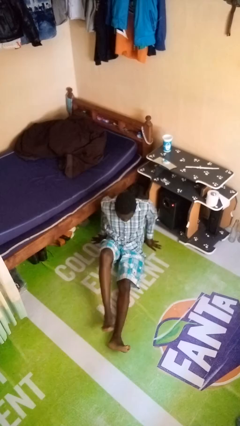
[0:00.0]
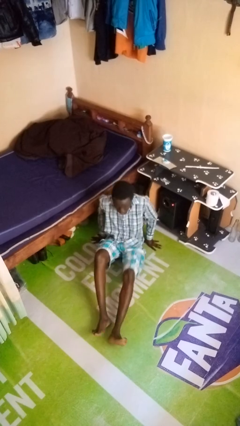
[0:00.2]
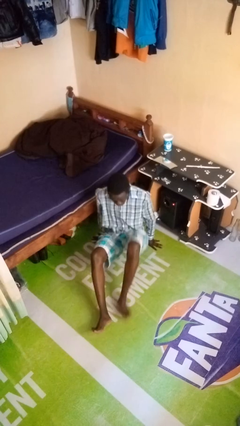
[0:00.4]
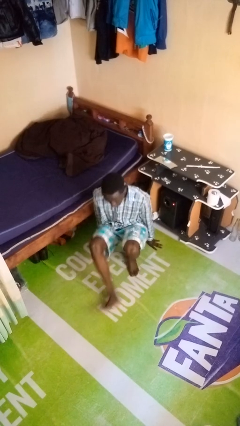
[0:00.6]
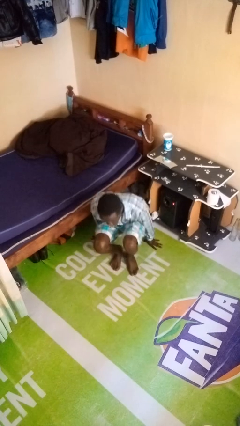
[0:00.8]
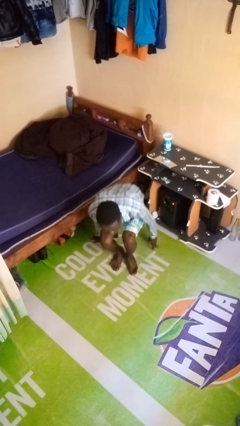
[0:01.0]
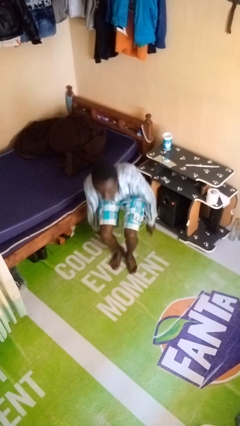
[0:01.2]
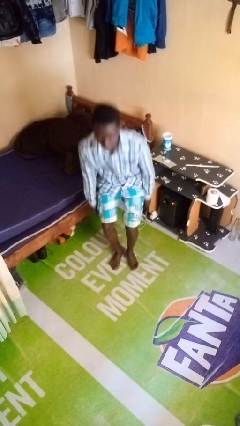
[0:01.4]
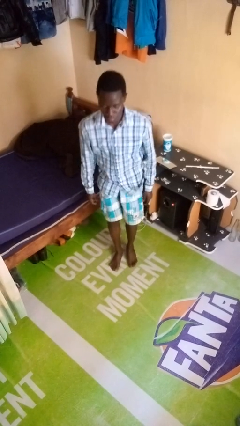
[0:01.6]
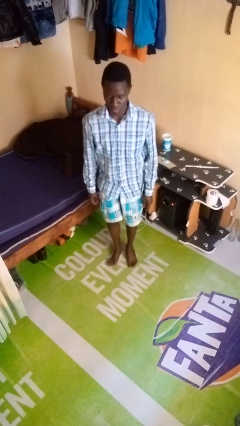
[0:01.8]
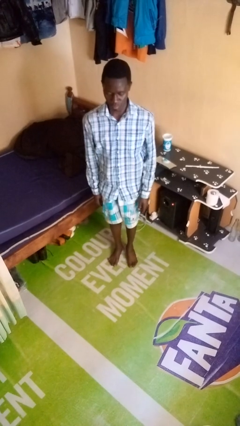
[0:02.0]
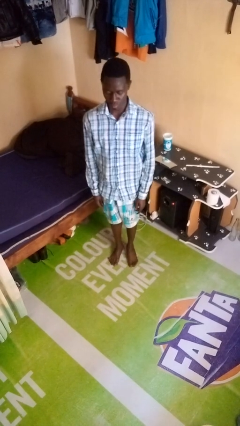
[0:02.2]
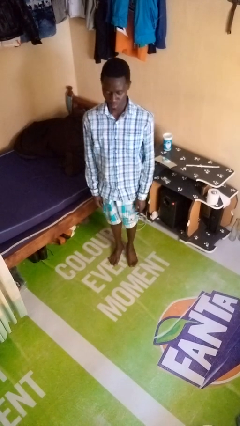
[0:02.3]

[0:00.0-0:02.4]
person stands up from floor

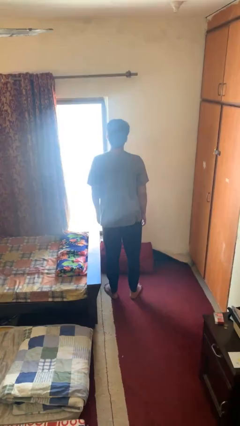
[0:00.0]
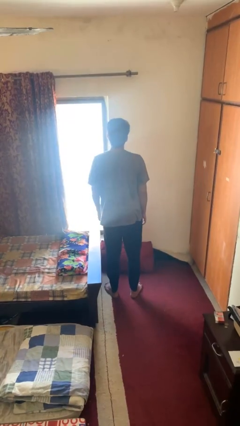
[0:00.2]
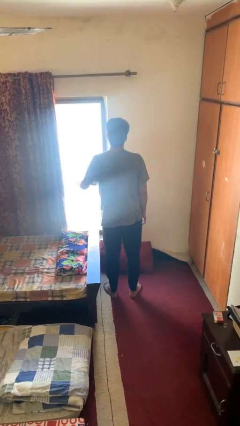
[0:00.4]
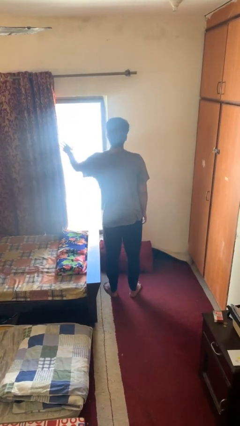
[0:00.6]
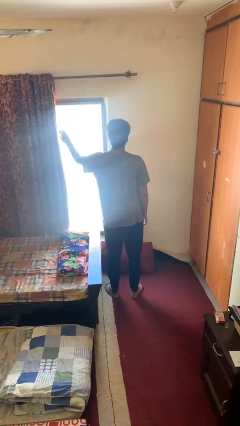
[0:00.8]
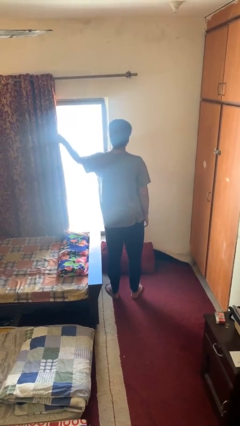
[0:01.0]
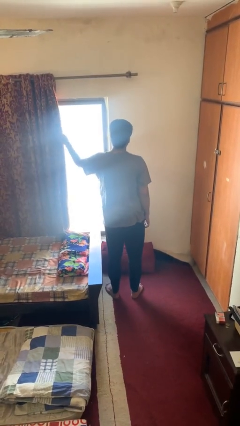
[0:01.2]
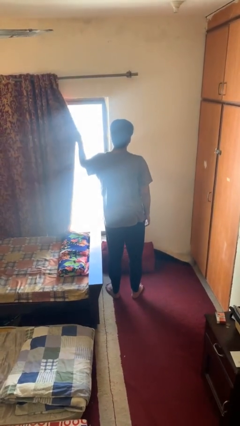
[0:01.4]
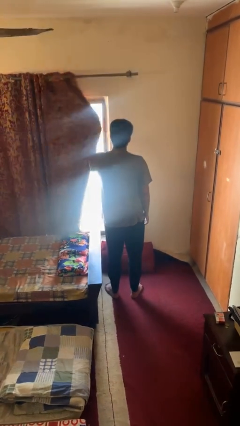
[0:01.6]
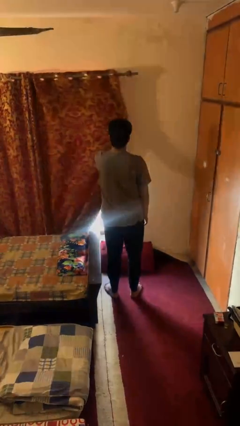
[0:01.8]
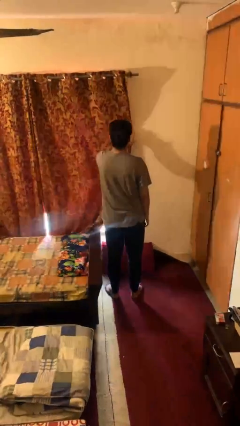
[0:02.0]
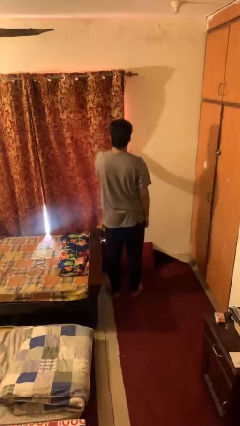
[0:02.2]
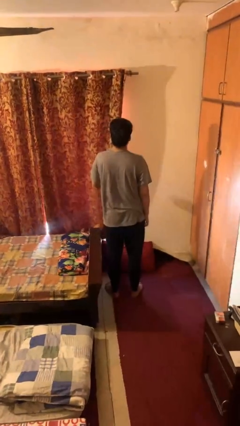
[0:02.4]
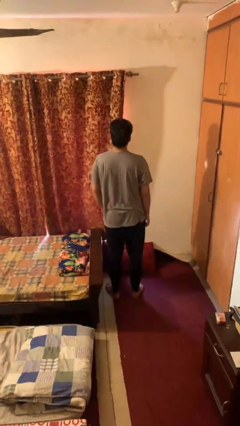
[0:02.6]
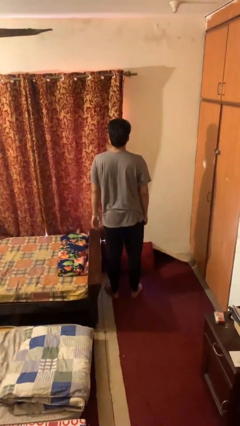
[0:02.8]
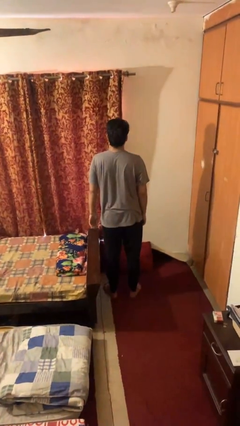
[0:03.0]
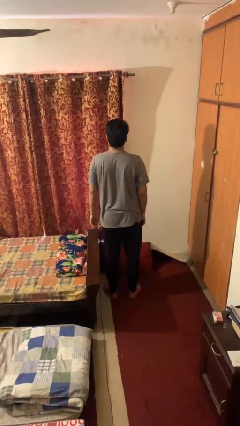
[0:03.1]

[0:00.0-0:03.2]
person closes curtains

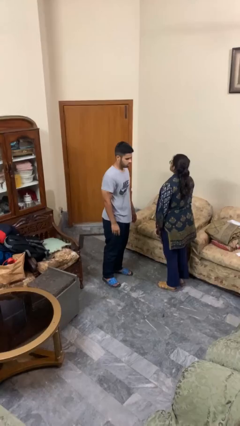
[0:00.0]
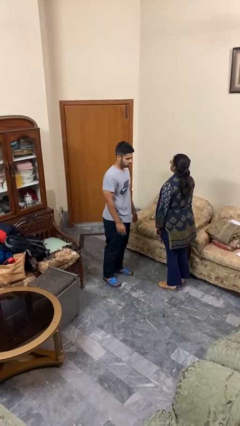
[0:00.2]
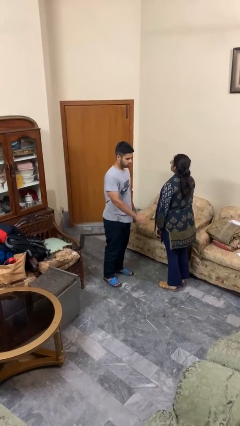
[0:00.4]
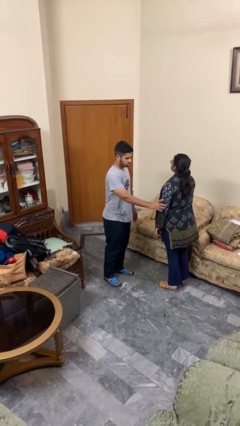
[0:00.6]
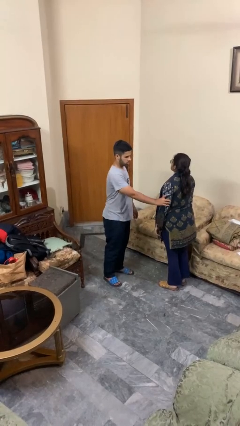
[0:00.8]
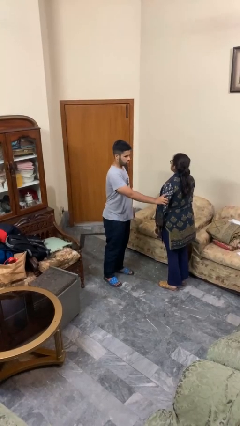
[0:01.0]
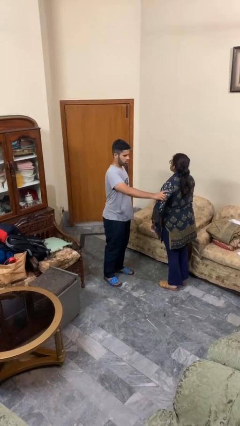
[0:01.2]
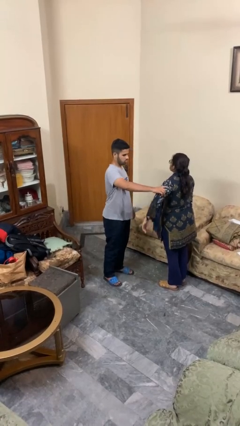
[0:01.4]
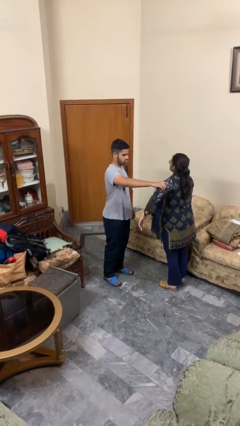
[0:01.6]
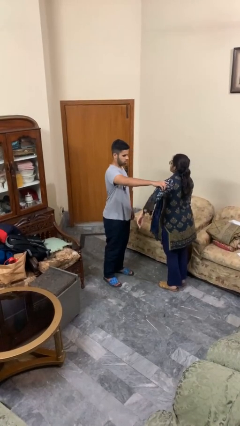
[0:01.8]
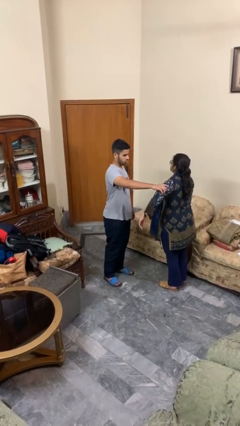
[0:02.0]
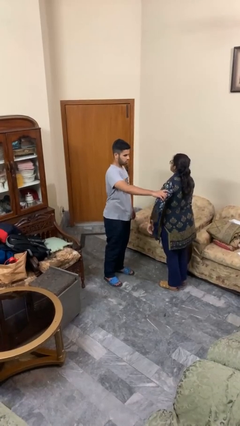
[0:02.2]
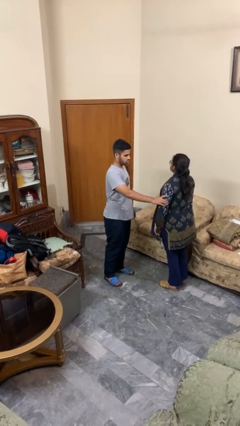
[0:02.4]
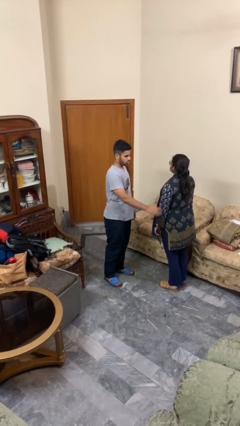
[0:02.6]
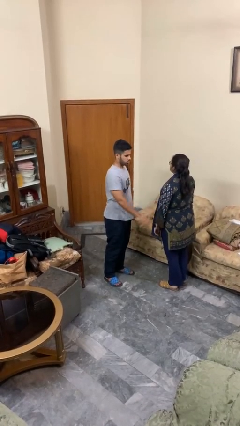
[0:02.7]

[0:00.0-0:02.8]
person grabs person by bicep

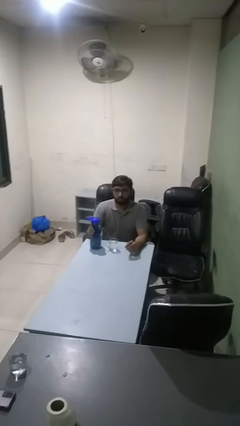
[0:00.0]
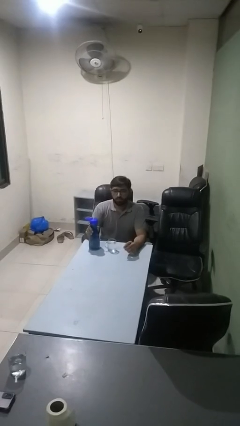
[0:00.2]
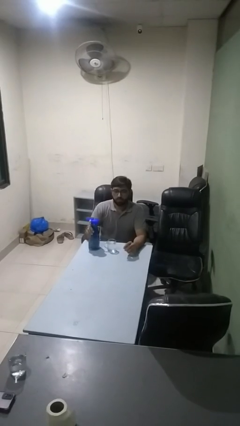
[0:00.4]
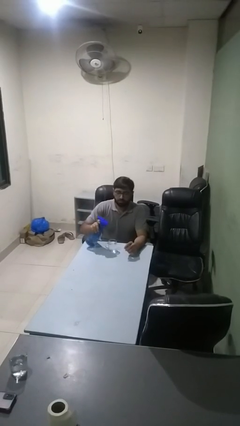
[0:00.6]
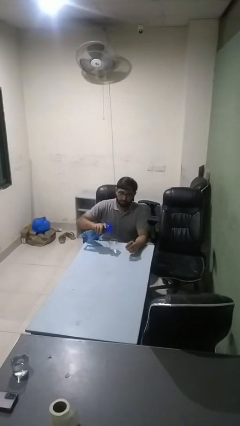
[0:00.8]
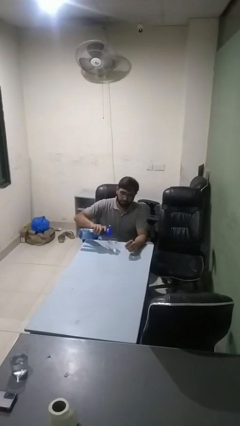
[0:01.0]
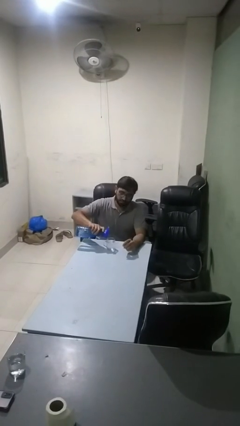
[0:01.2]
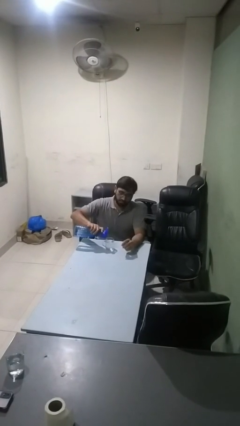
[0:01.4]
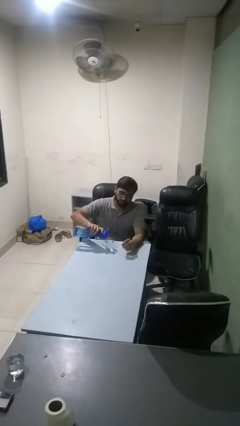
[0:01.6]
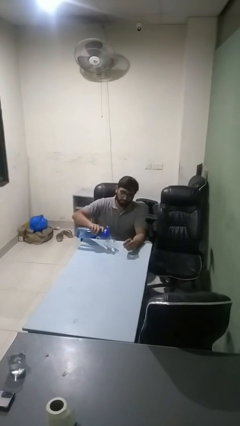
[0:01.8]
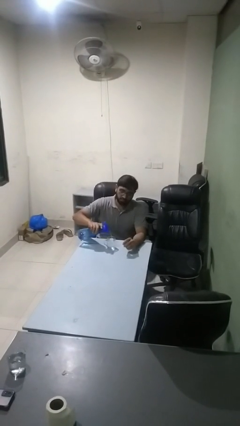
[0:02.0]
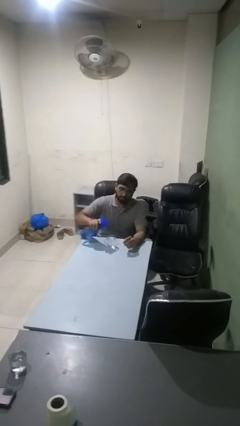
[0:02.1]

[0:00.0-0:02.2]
person pours liquid into cup

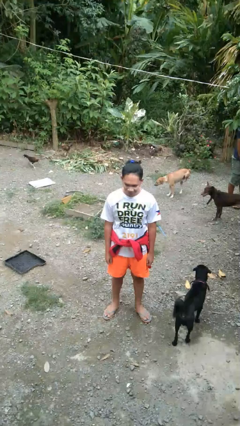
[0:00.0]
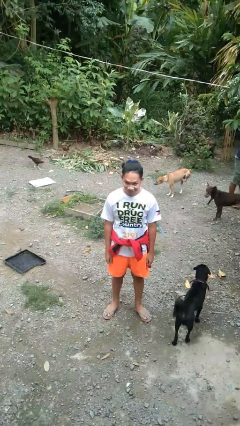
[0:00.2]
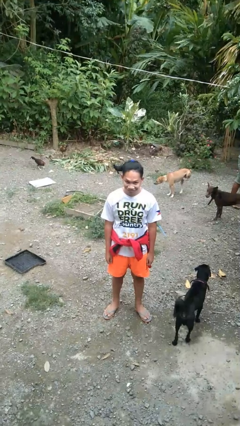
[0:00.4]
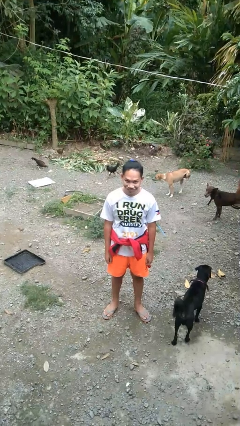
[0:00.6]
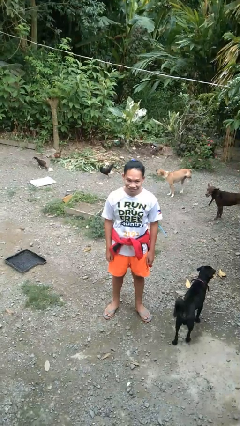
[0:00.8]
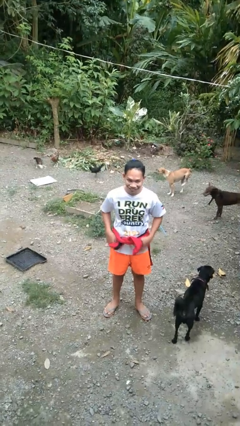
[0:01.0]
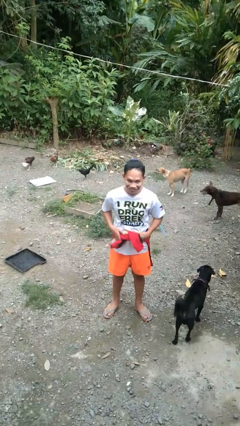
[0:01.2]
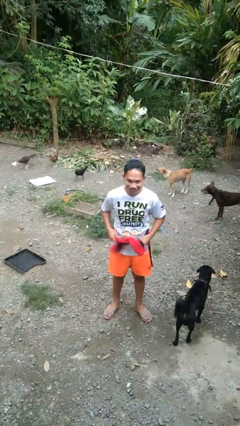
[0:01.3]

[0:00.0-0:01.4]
person unties jacket around waist

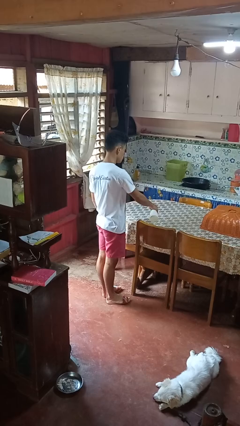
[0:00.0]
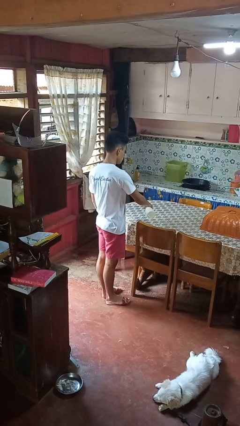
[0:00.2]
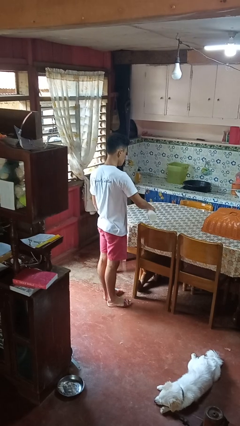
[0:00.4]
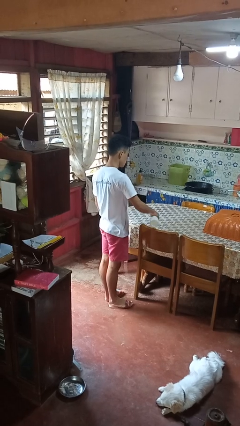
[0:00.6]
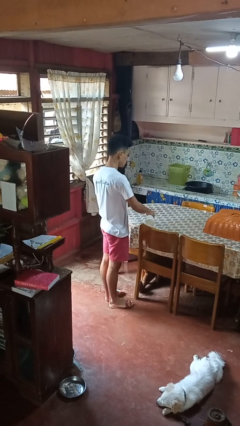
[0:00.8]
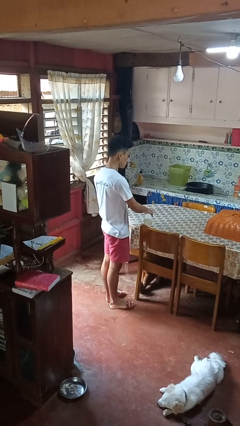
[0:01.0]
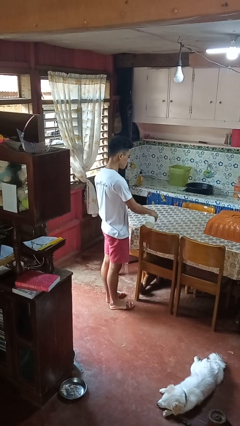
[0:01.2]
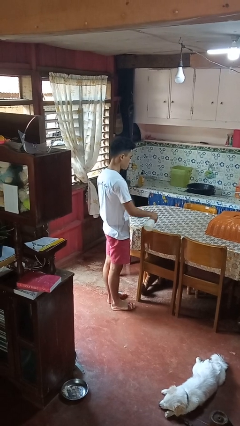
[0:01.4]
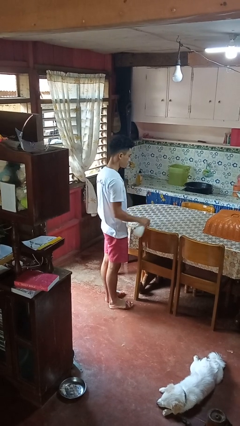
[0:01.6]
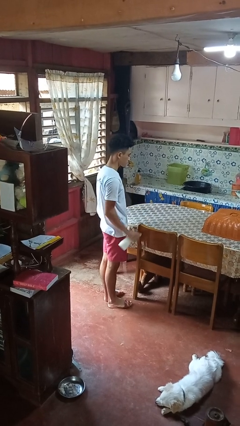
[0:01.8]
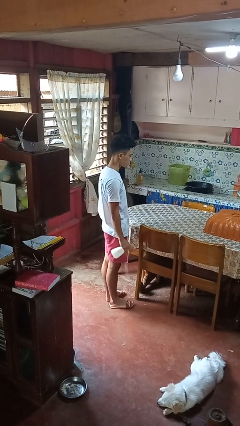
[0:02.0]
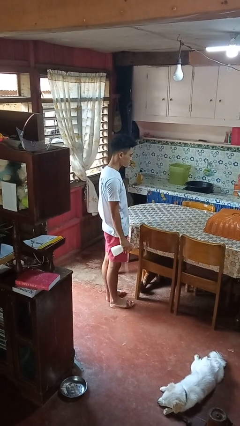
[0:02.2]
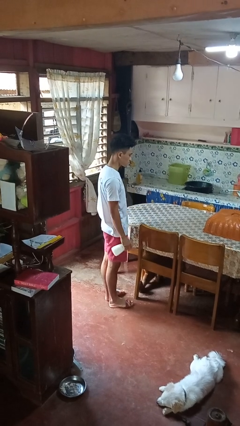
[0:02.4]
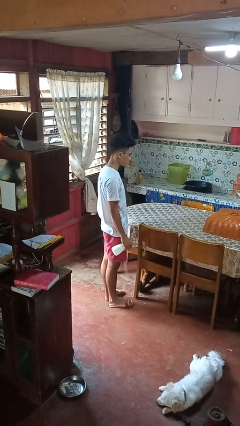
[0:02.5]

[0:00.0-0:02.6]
person sprays from bottle

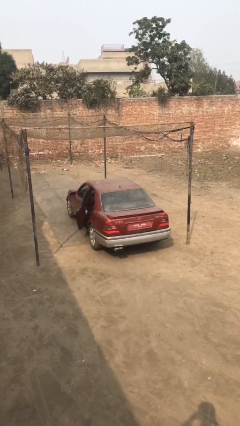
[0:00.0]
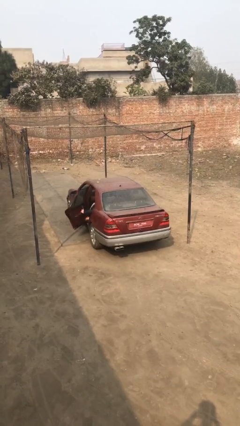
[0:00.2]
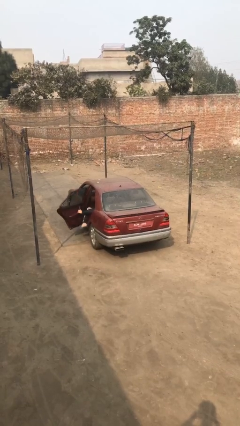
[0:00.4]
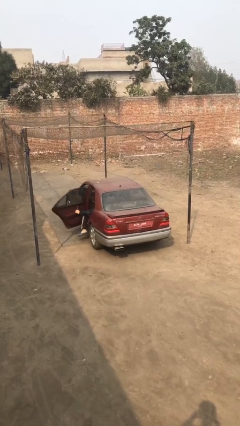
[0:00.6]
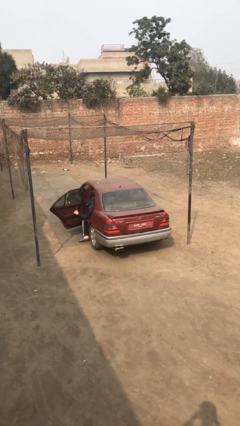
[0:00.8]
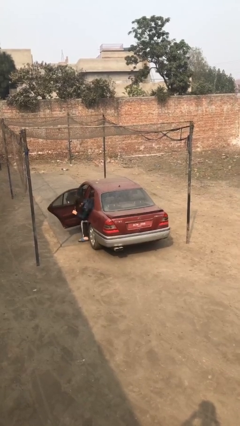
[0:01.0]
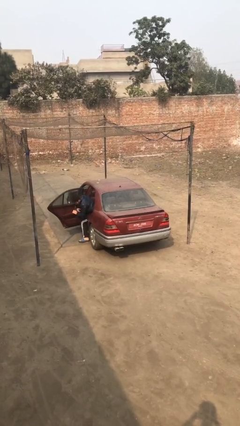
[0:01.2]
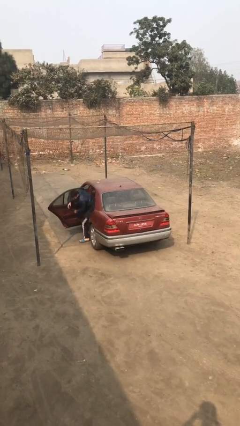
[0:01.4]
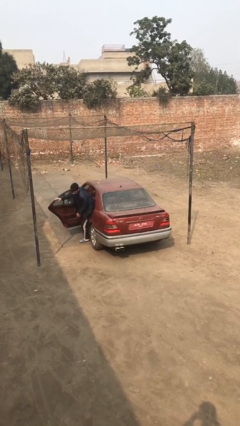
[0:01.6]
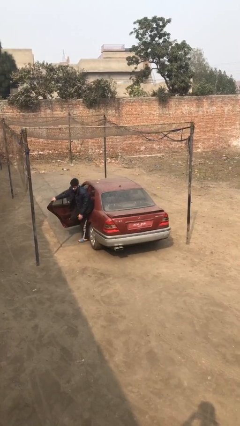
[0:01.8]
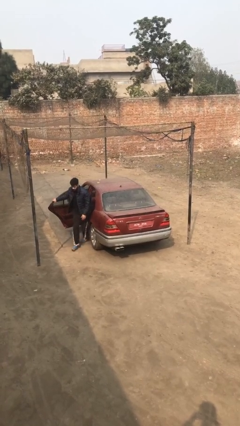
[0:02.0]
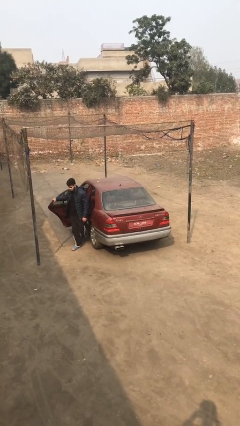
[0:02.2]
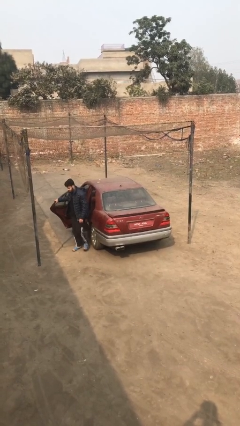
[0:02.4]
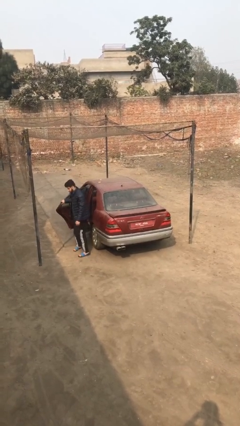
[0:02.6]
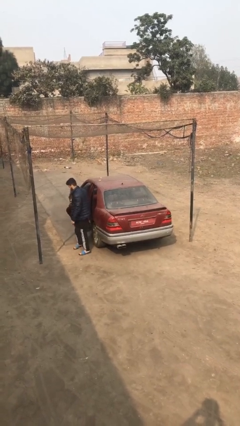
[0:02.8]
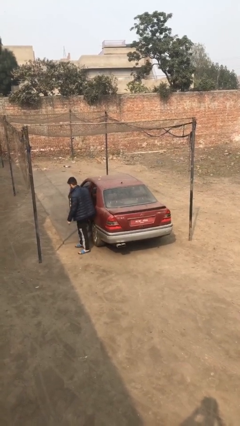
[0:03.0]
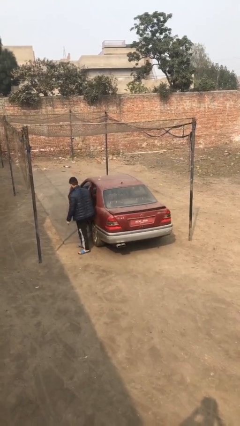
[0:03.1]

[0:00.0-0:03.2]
car drops off person
